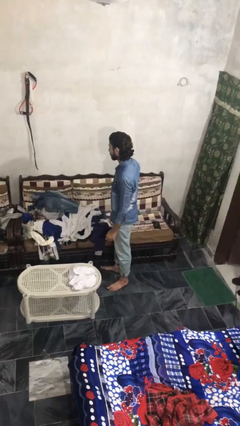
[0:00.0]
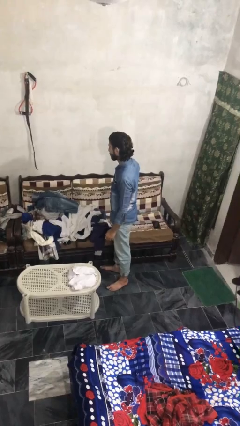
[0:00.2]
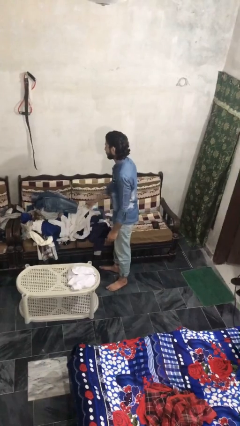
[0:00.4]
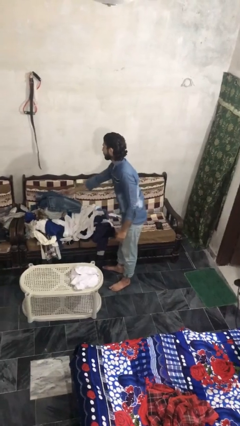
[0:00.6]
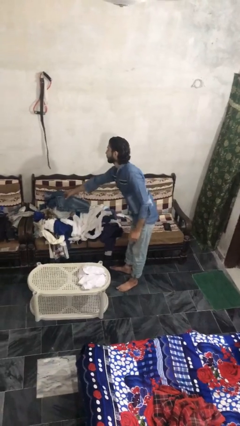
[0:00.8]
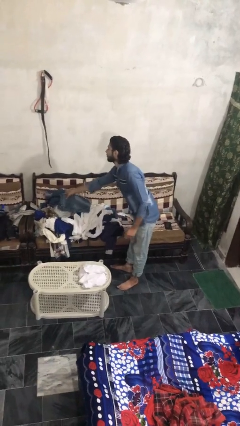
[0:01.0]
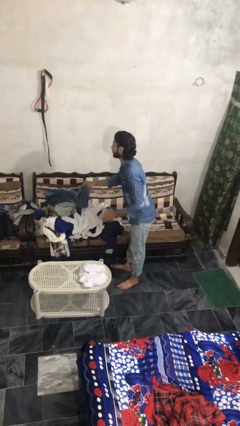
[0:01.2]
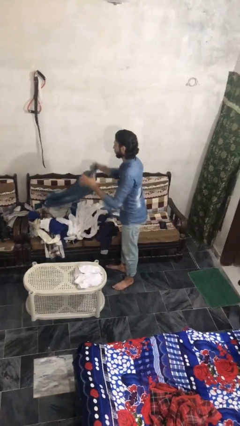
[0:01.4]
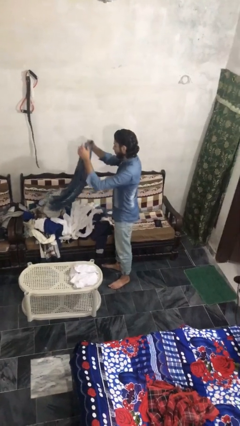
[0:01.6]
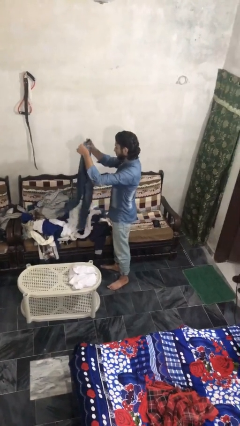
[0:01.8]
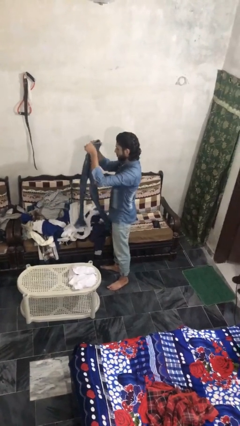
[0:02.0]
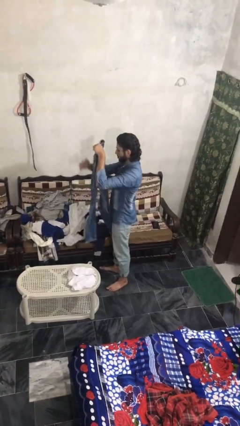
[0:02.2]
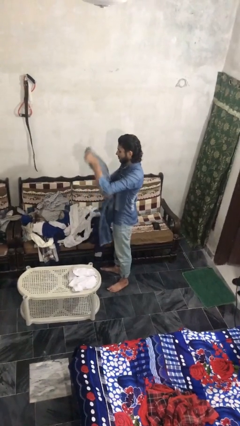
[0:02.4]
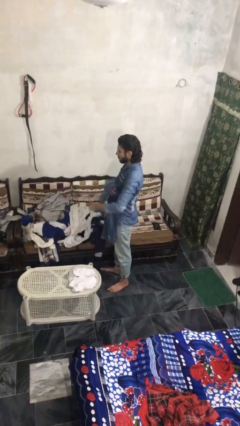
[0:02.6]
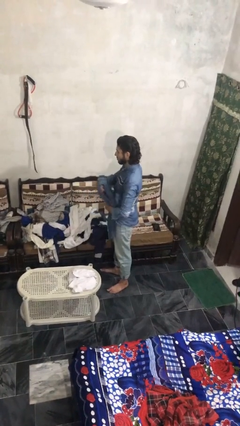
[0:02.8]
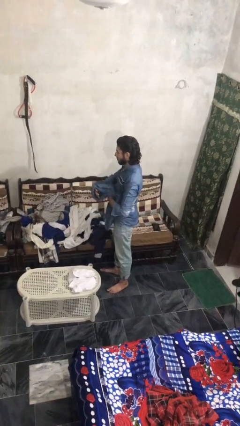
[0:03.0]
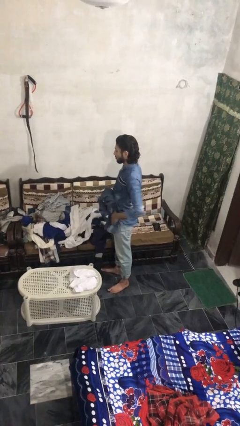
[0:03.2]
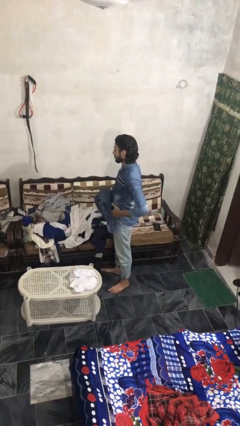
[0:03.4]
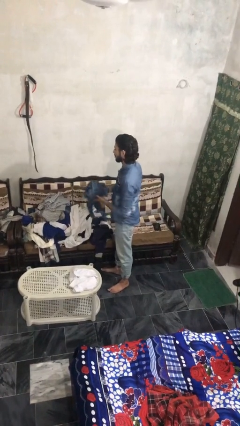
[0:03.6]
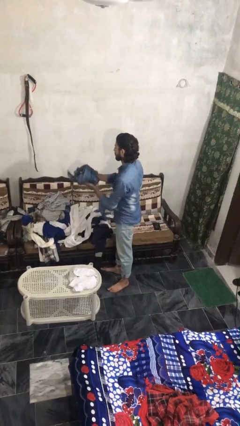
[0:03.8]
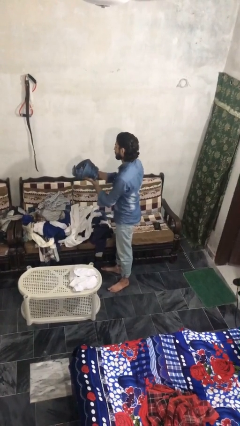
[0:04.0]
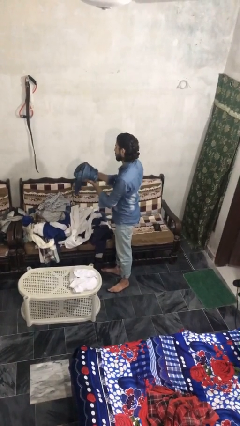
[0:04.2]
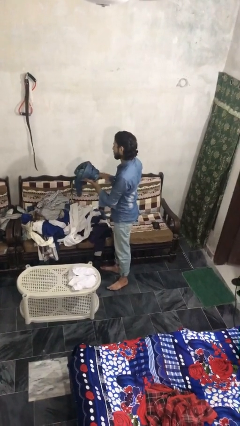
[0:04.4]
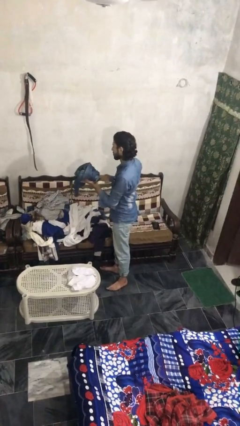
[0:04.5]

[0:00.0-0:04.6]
person folds pants

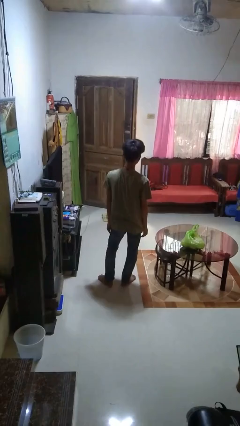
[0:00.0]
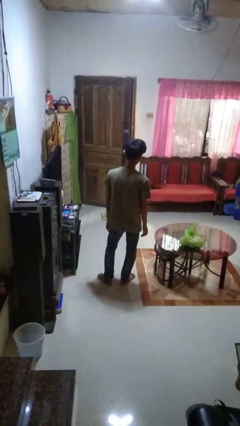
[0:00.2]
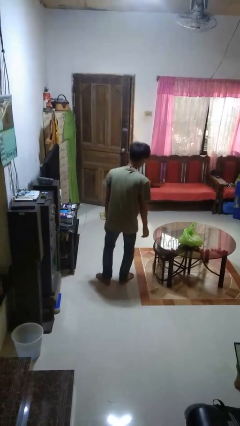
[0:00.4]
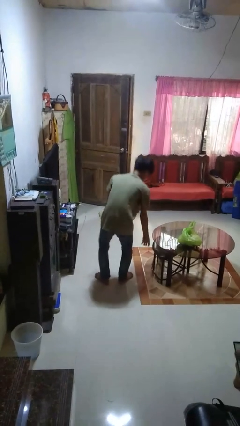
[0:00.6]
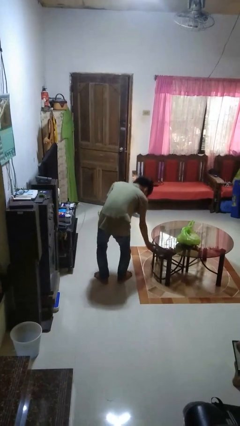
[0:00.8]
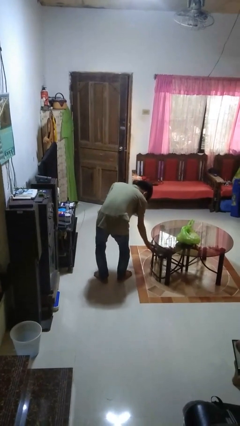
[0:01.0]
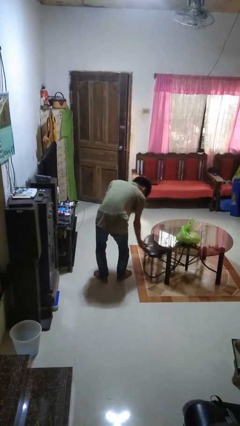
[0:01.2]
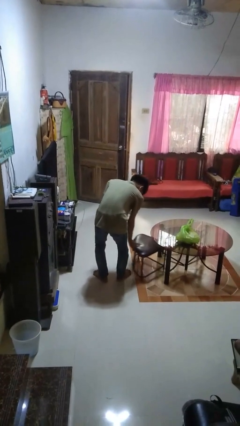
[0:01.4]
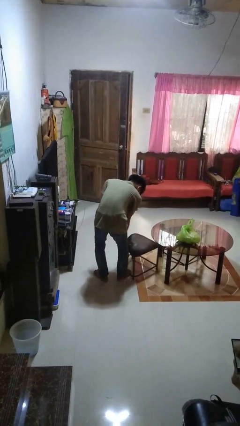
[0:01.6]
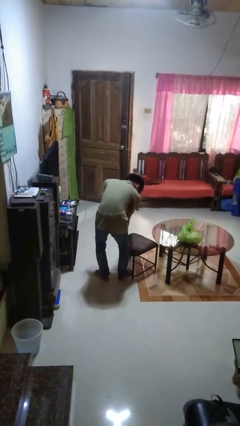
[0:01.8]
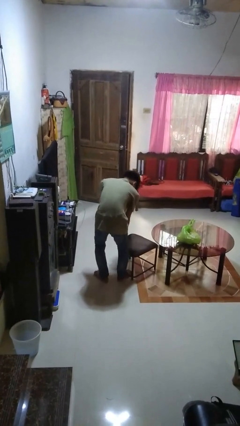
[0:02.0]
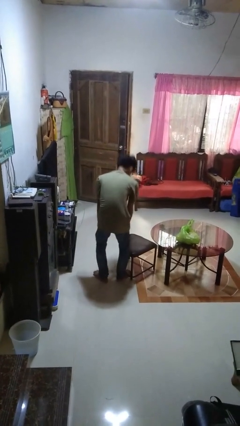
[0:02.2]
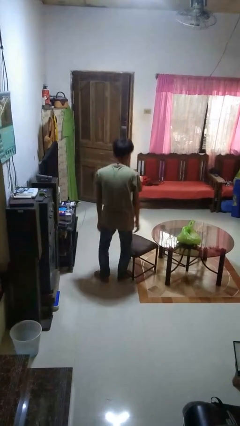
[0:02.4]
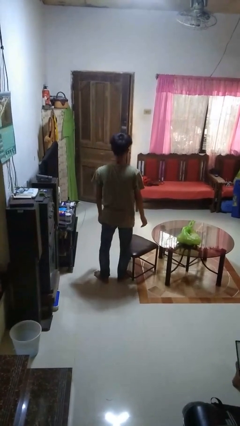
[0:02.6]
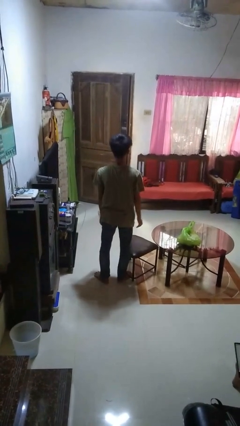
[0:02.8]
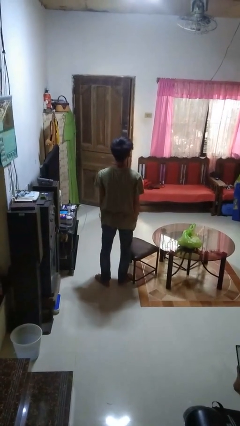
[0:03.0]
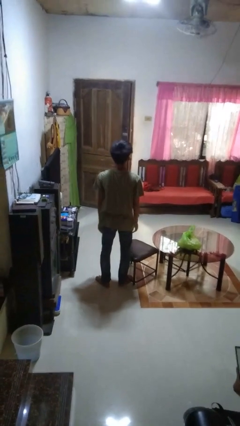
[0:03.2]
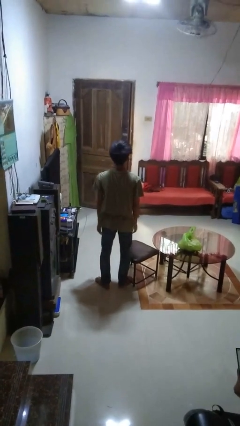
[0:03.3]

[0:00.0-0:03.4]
person pulls out chair

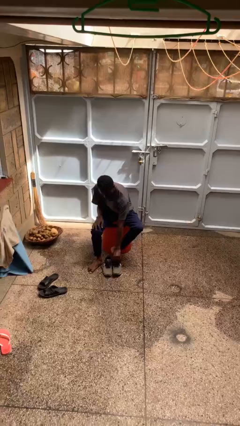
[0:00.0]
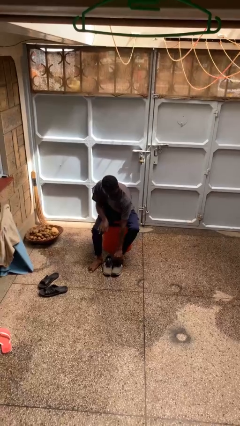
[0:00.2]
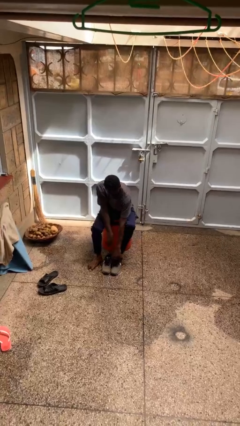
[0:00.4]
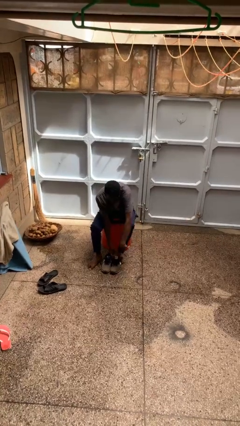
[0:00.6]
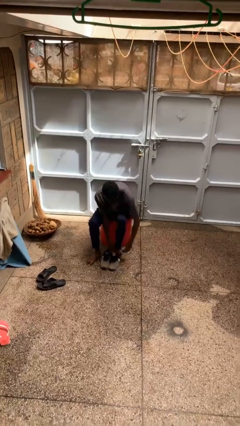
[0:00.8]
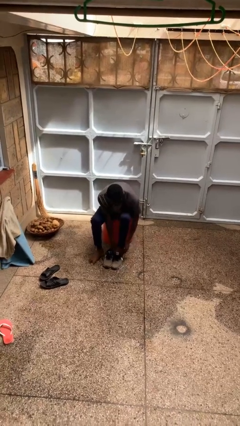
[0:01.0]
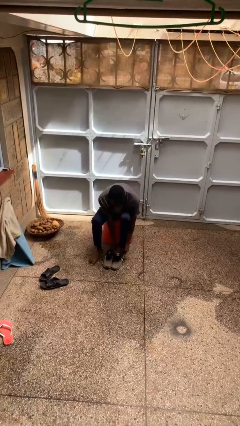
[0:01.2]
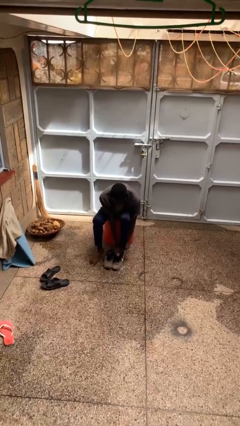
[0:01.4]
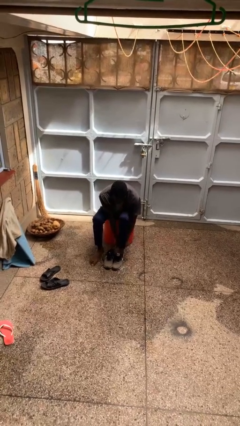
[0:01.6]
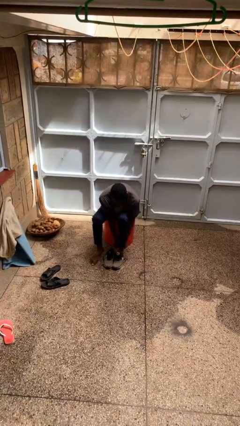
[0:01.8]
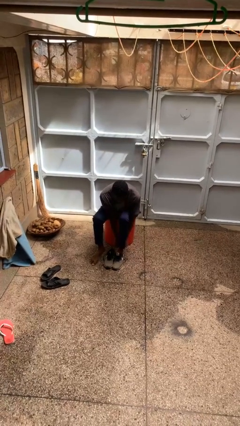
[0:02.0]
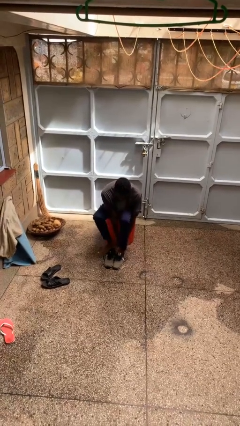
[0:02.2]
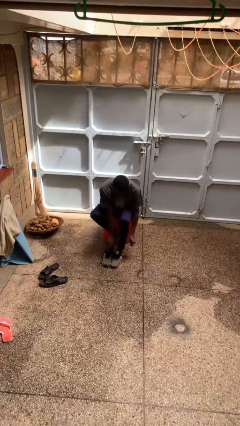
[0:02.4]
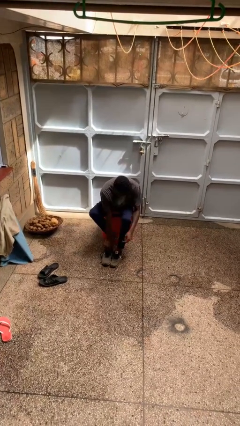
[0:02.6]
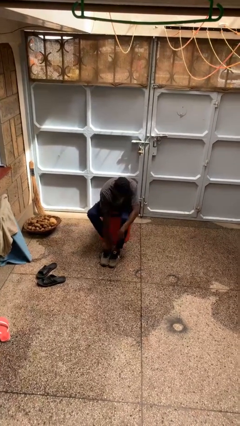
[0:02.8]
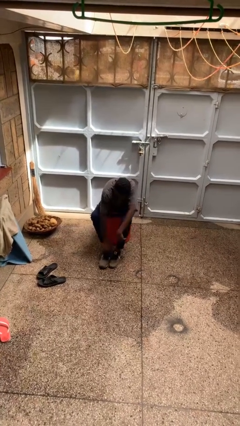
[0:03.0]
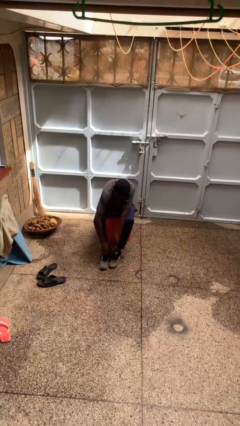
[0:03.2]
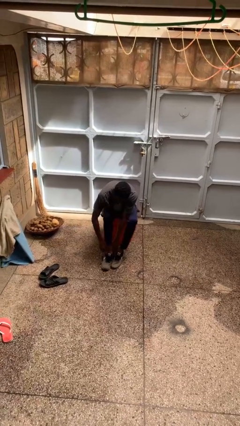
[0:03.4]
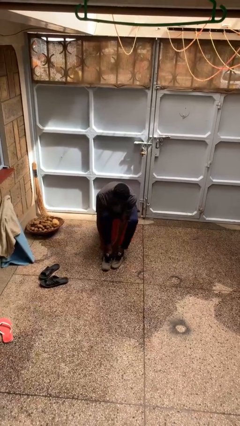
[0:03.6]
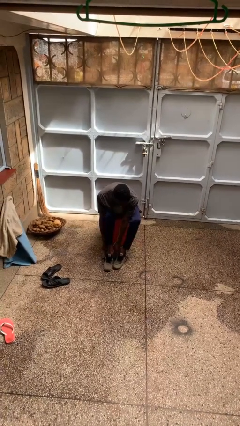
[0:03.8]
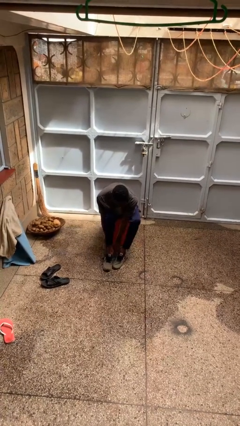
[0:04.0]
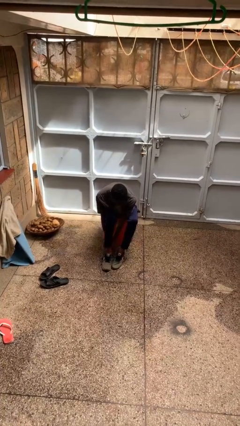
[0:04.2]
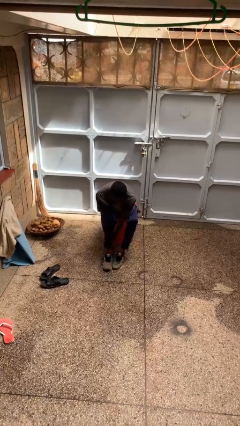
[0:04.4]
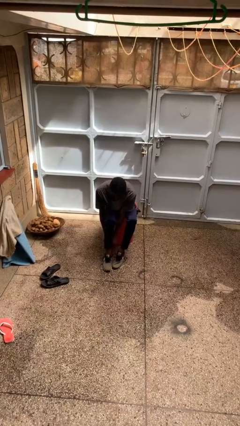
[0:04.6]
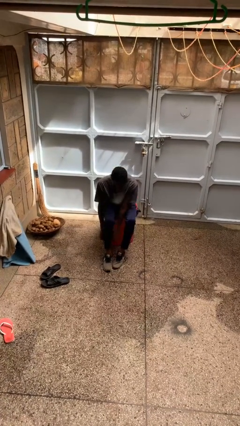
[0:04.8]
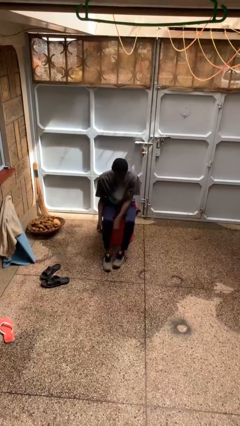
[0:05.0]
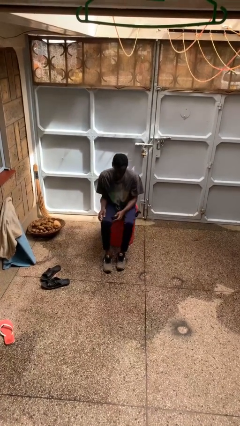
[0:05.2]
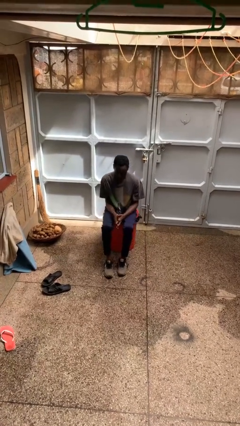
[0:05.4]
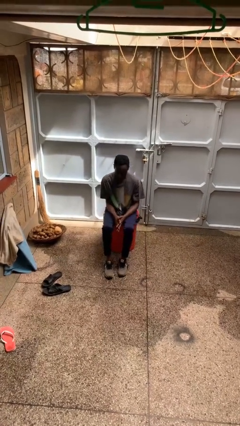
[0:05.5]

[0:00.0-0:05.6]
person puts on shoes

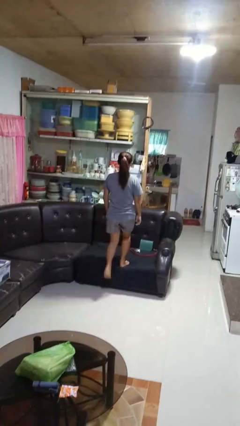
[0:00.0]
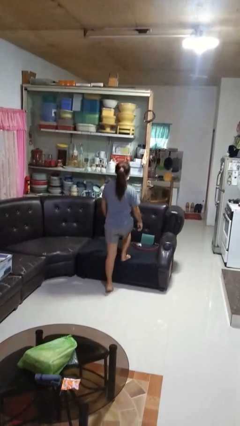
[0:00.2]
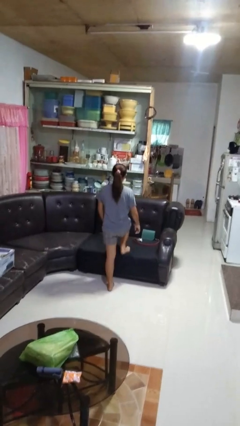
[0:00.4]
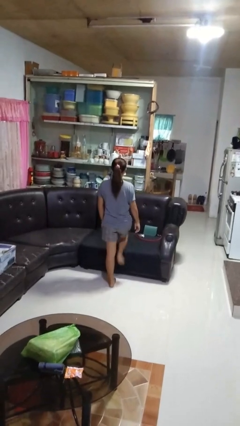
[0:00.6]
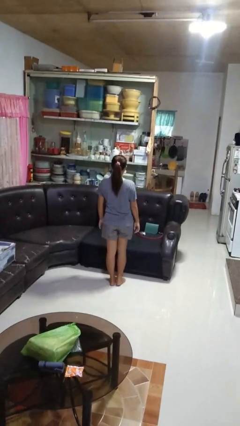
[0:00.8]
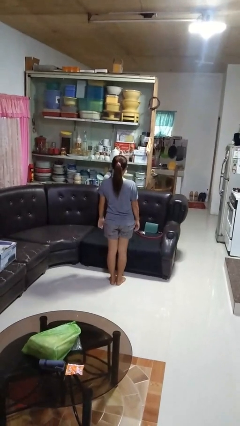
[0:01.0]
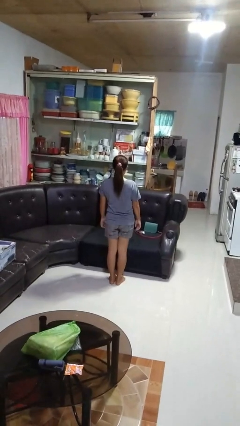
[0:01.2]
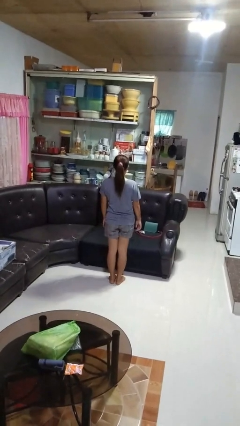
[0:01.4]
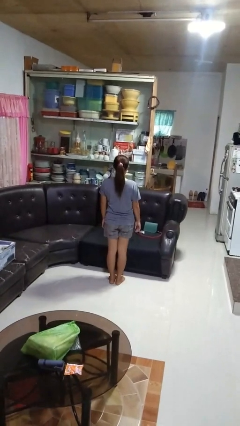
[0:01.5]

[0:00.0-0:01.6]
person climbs off couch

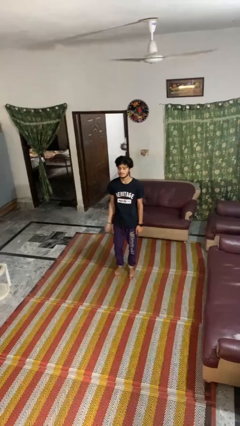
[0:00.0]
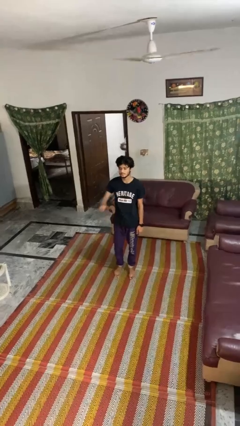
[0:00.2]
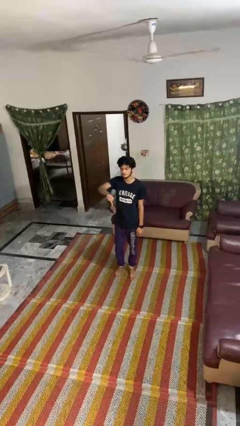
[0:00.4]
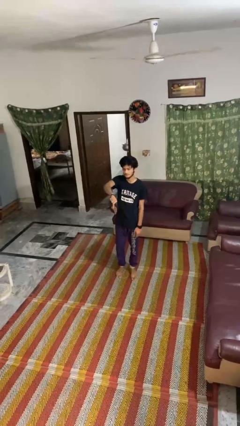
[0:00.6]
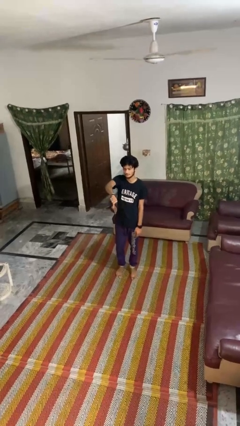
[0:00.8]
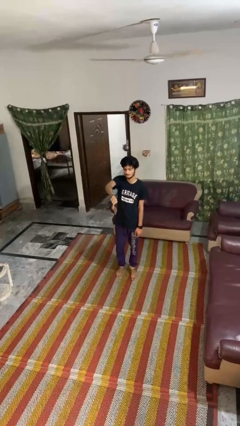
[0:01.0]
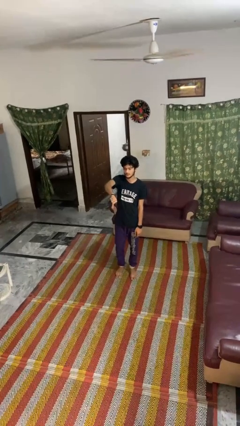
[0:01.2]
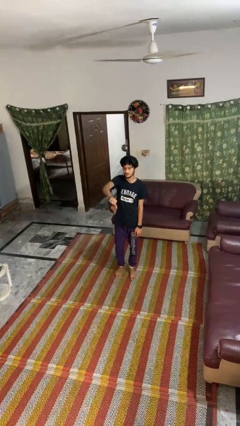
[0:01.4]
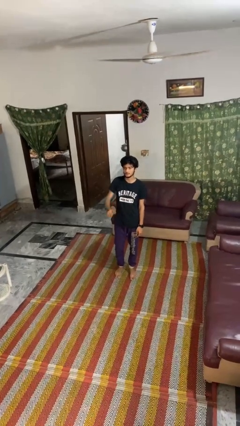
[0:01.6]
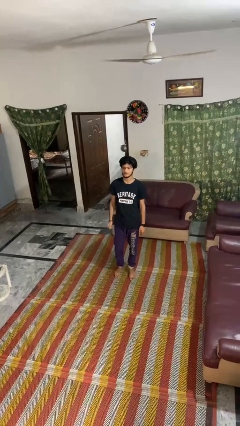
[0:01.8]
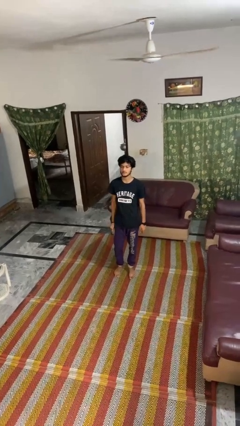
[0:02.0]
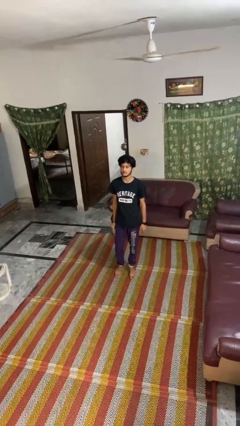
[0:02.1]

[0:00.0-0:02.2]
person gestures thumbs down
